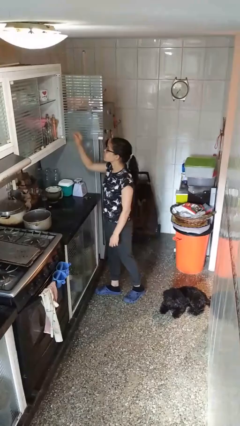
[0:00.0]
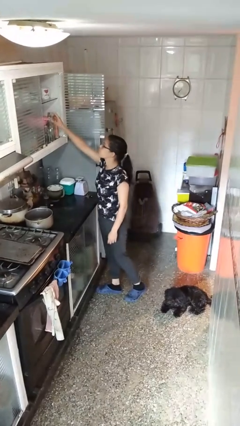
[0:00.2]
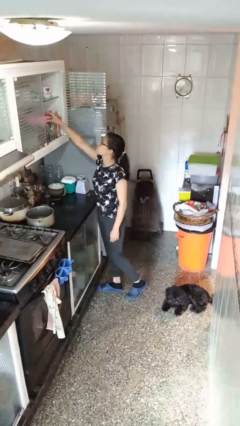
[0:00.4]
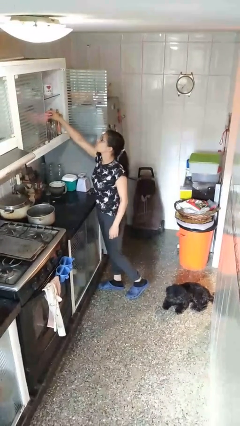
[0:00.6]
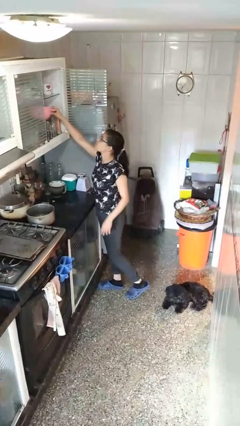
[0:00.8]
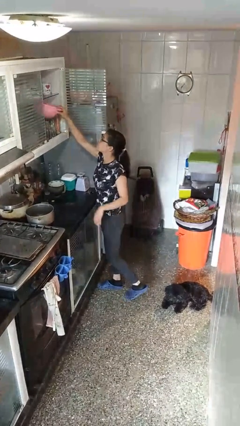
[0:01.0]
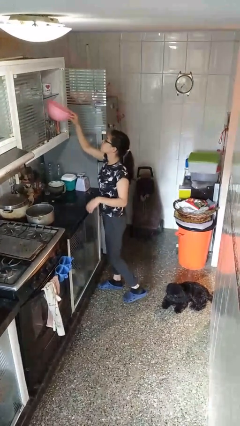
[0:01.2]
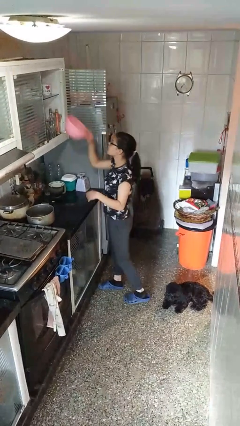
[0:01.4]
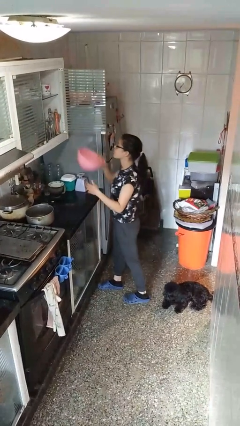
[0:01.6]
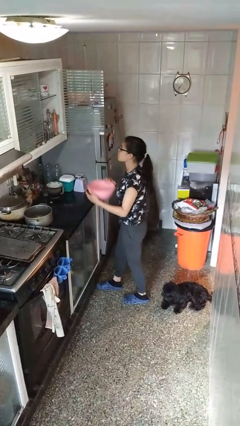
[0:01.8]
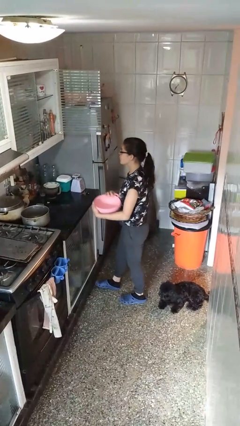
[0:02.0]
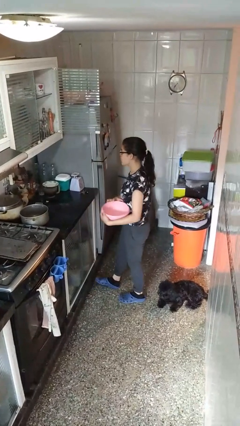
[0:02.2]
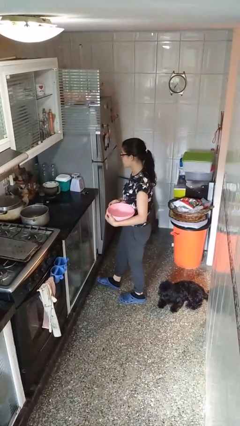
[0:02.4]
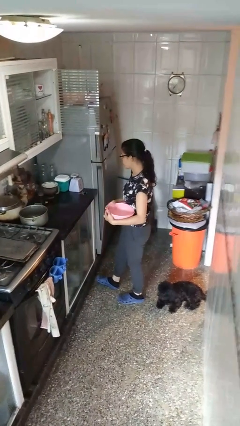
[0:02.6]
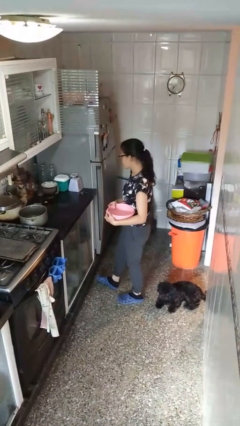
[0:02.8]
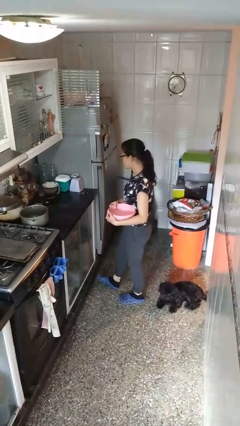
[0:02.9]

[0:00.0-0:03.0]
person picks up object from cabinet

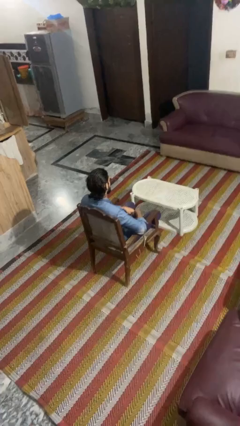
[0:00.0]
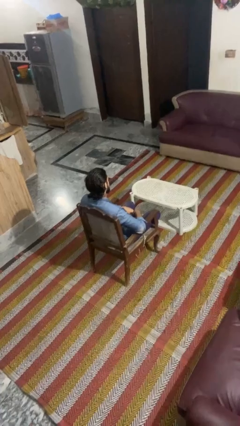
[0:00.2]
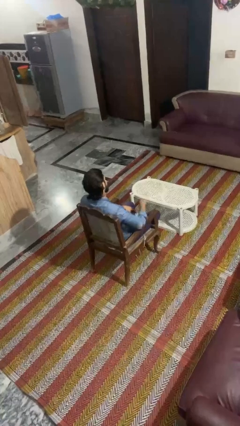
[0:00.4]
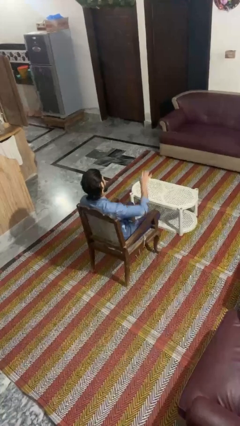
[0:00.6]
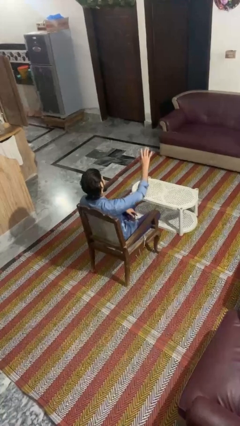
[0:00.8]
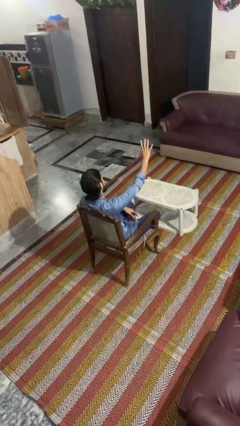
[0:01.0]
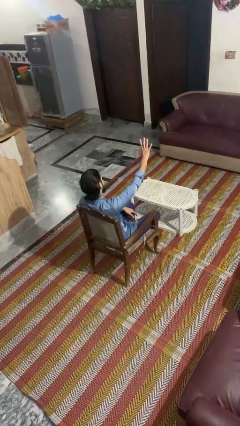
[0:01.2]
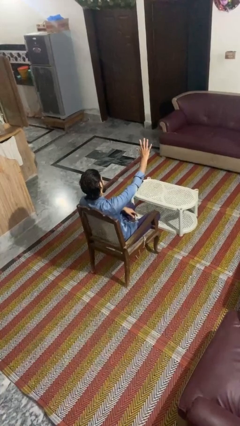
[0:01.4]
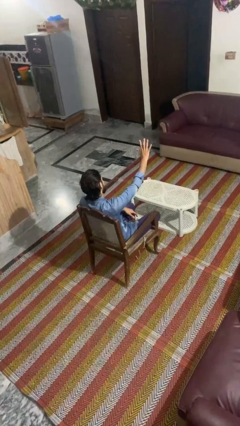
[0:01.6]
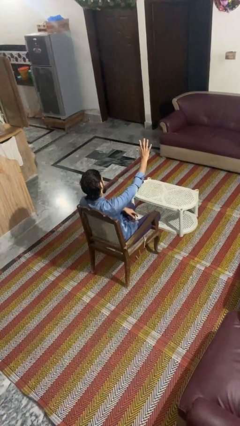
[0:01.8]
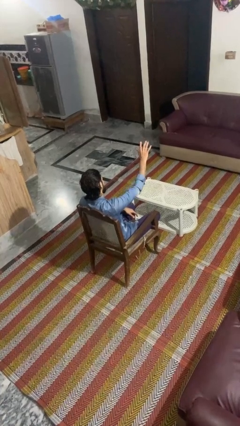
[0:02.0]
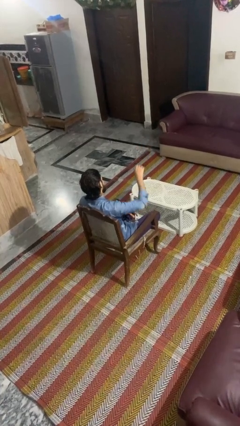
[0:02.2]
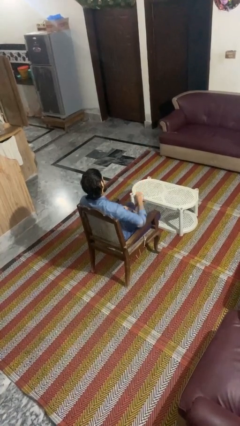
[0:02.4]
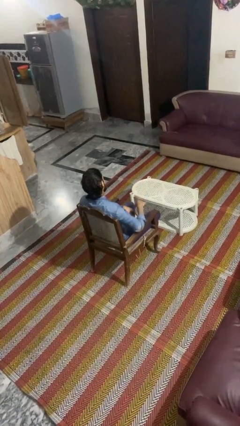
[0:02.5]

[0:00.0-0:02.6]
person gestures number five

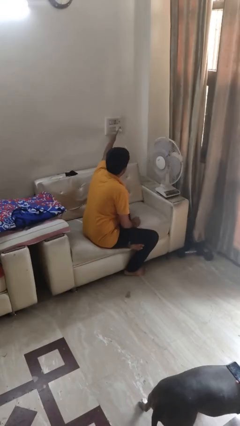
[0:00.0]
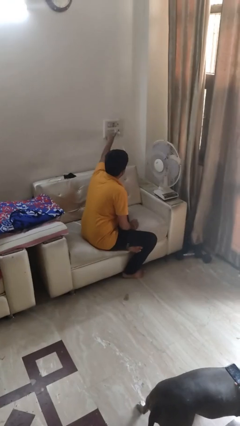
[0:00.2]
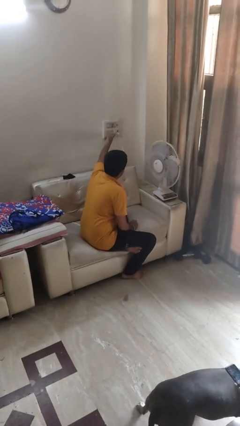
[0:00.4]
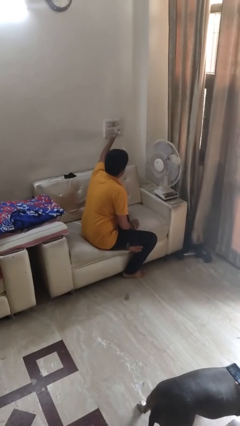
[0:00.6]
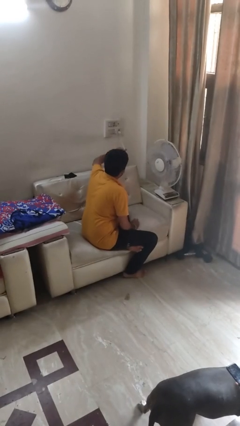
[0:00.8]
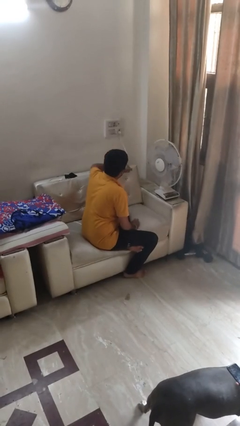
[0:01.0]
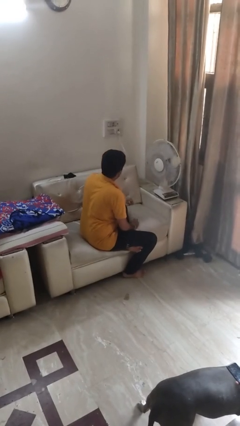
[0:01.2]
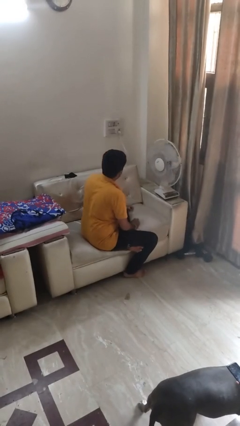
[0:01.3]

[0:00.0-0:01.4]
person turns on fan

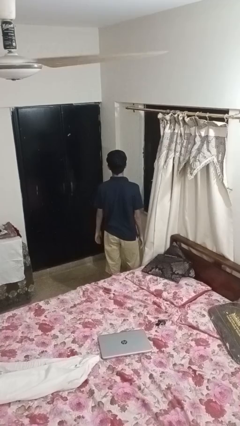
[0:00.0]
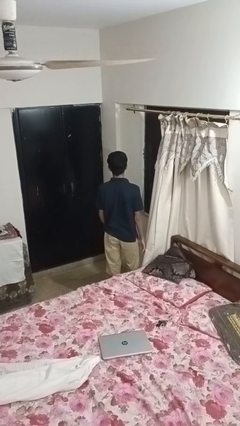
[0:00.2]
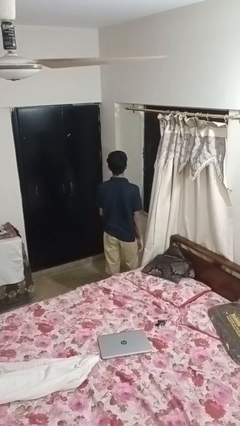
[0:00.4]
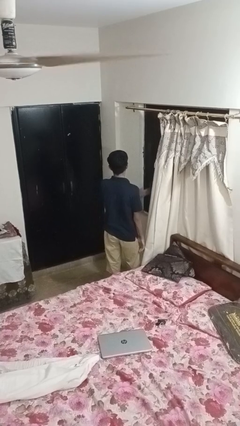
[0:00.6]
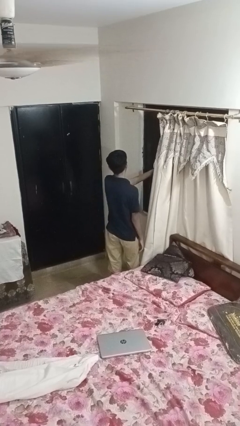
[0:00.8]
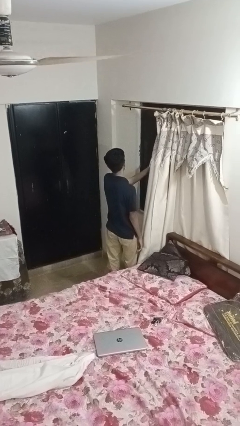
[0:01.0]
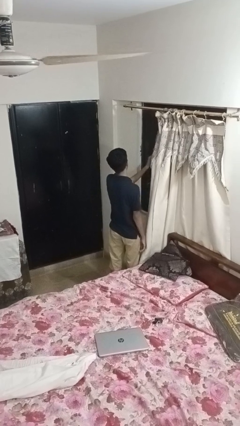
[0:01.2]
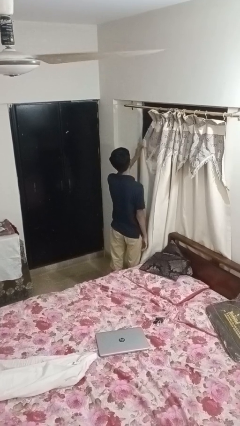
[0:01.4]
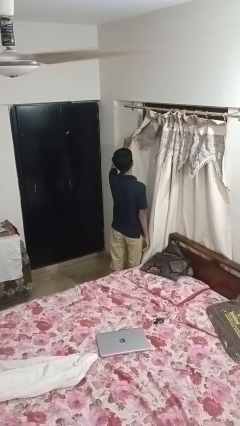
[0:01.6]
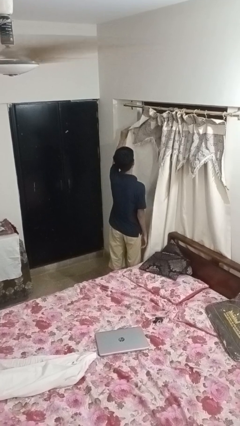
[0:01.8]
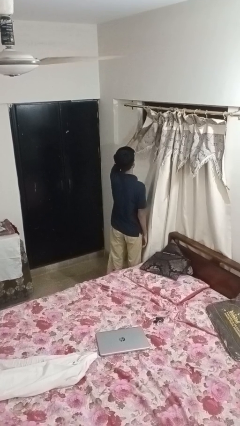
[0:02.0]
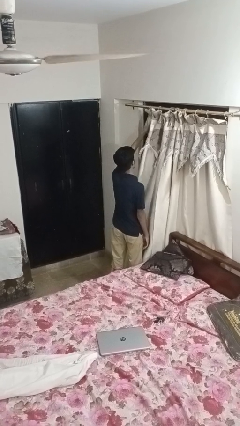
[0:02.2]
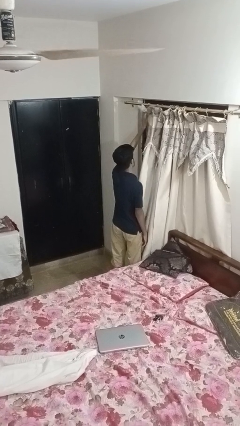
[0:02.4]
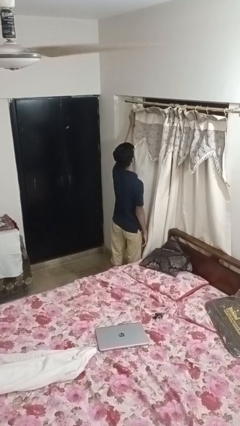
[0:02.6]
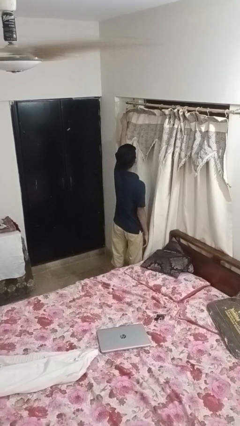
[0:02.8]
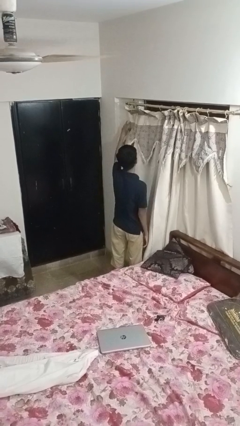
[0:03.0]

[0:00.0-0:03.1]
person closes curtains

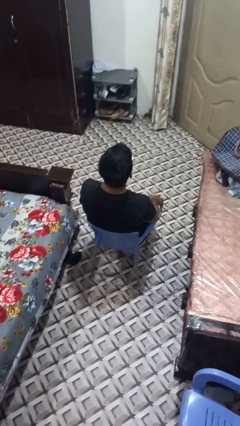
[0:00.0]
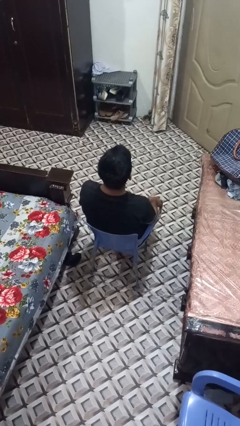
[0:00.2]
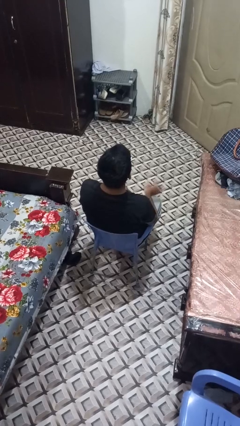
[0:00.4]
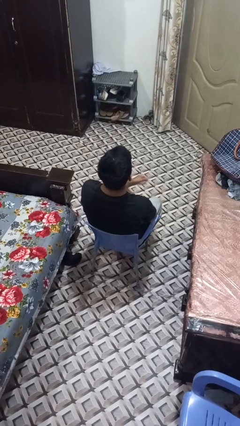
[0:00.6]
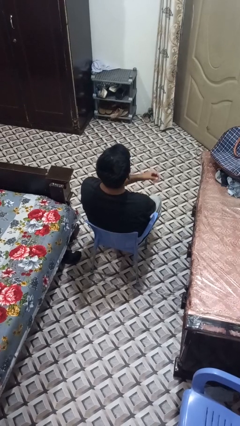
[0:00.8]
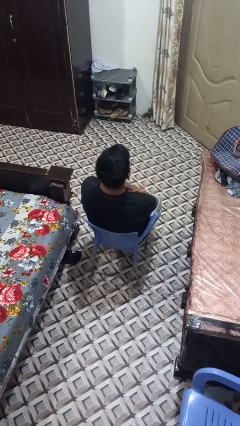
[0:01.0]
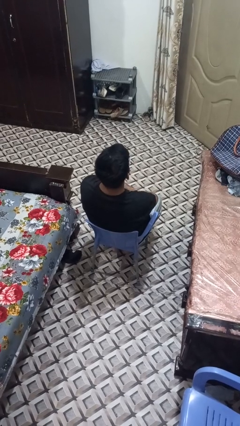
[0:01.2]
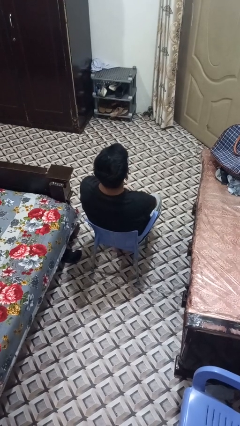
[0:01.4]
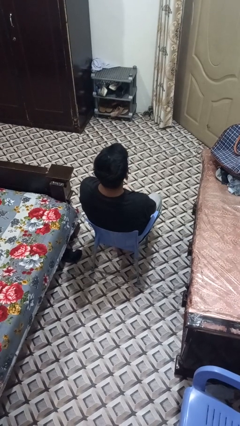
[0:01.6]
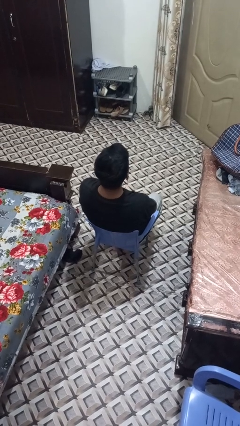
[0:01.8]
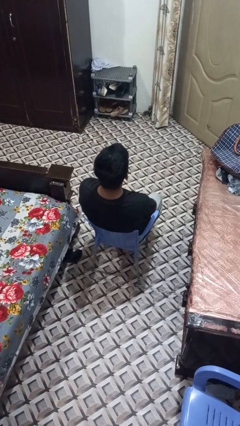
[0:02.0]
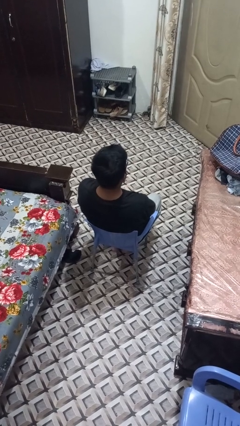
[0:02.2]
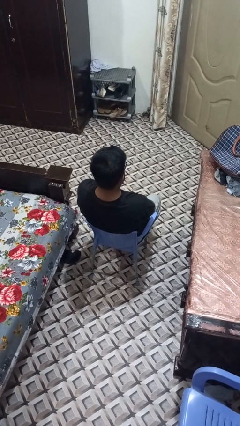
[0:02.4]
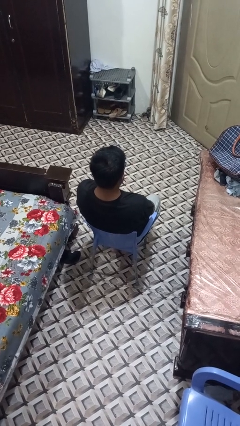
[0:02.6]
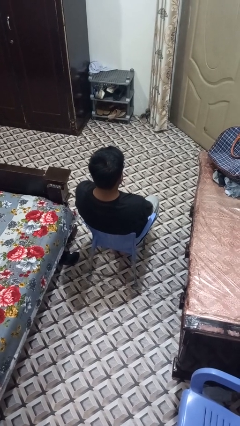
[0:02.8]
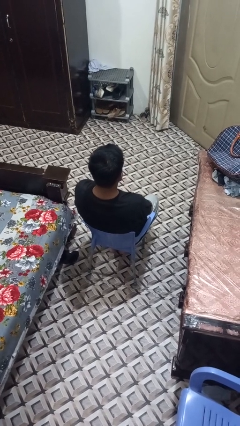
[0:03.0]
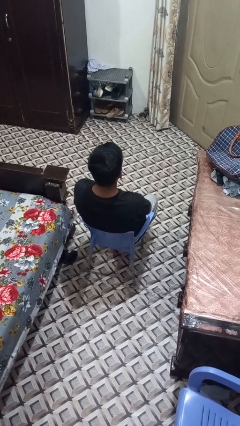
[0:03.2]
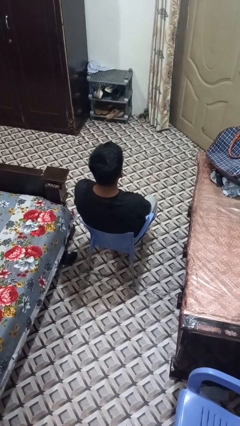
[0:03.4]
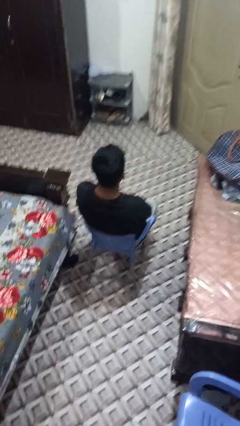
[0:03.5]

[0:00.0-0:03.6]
person crosses arms

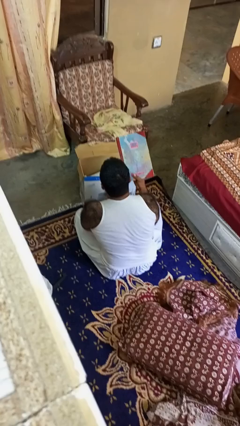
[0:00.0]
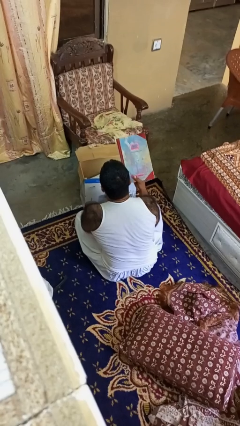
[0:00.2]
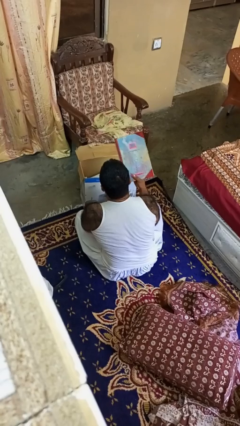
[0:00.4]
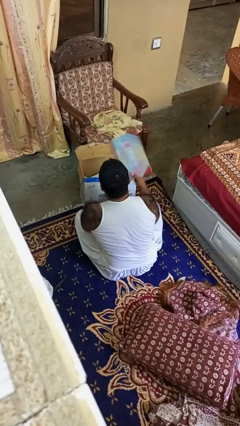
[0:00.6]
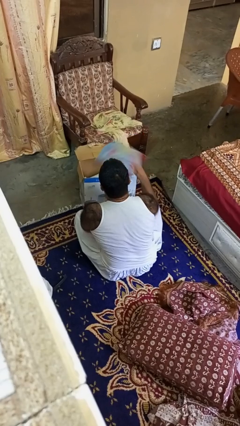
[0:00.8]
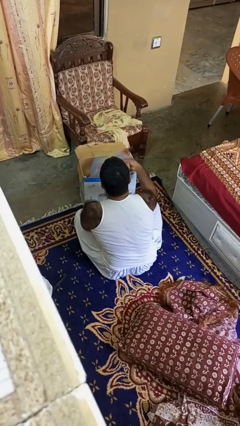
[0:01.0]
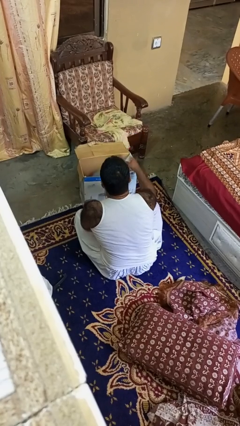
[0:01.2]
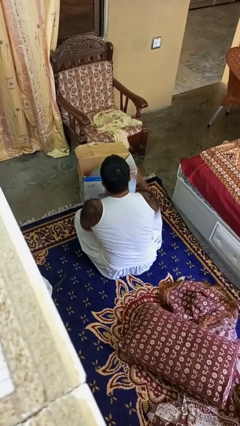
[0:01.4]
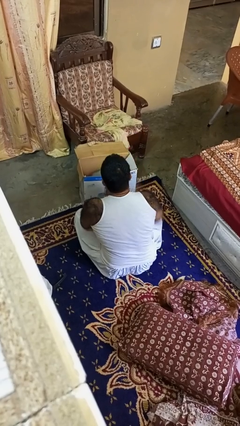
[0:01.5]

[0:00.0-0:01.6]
person puts object into box

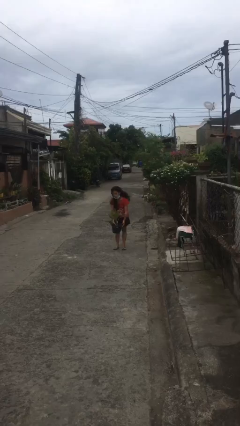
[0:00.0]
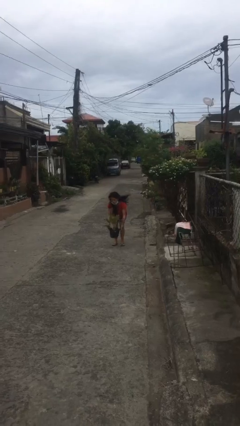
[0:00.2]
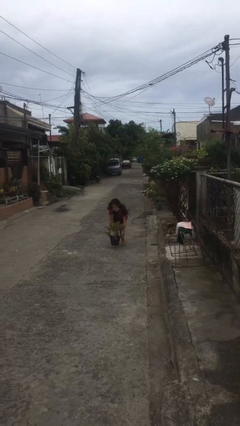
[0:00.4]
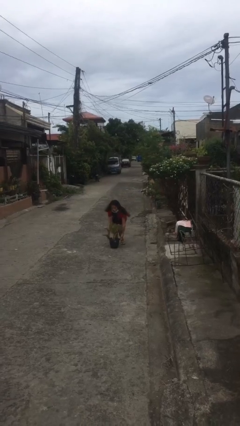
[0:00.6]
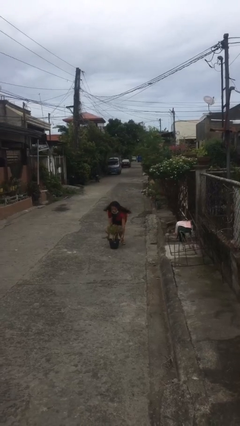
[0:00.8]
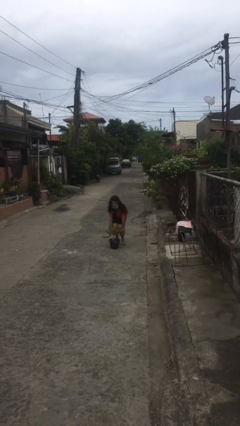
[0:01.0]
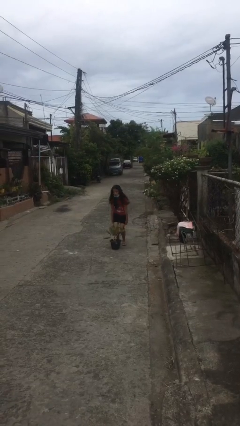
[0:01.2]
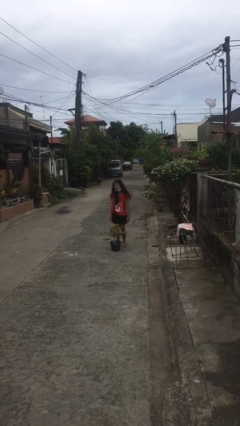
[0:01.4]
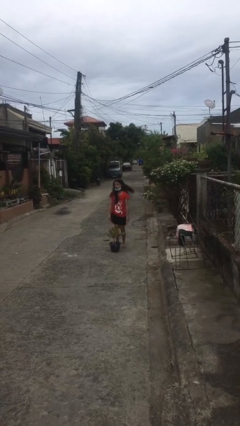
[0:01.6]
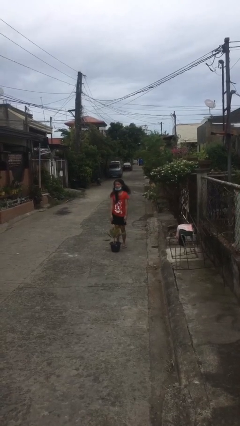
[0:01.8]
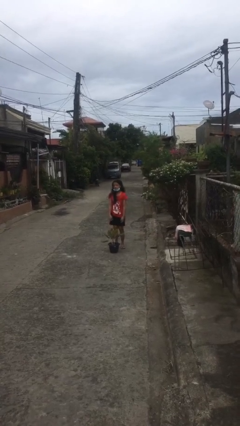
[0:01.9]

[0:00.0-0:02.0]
person puts down object on floor
